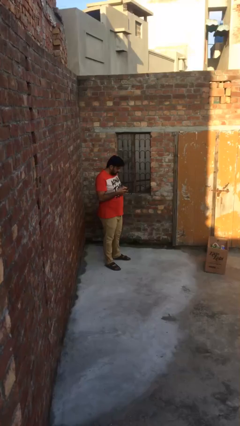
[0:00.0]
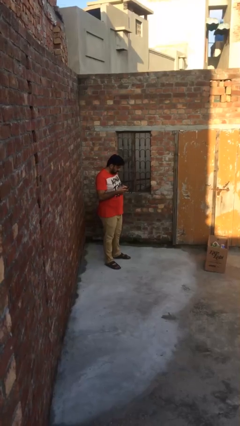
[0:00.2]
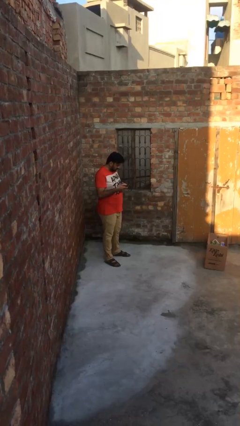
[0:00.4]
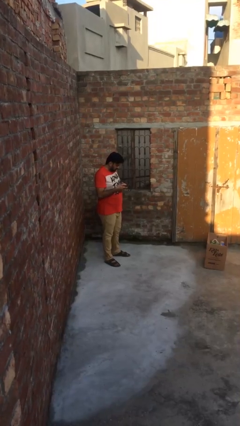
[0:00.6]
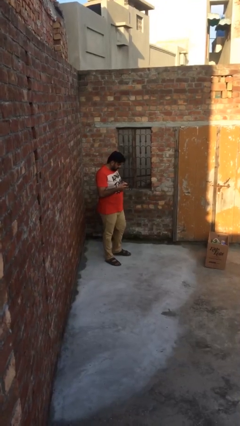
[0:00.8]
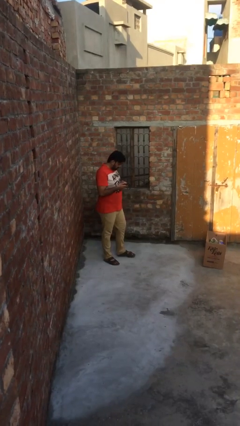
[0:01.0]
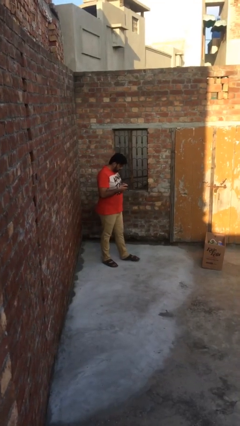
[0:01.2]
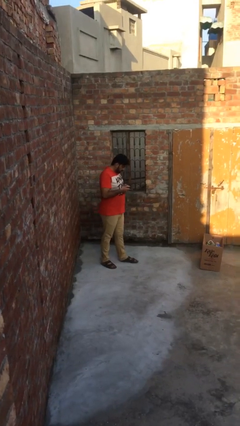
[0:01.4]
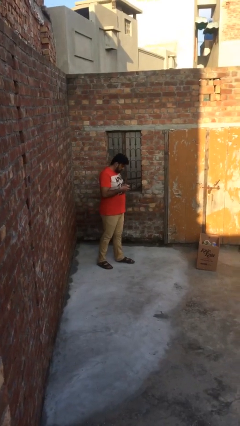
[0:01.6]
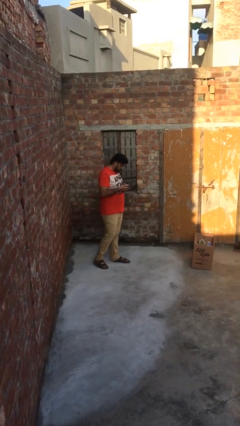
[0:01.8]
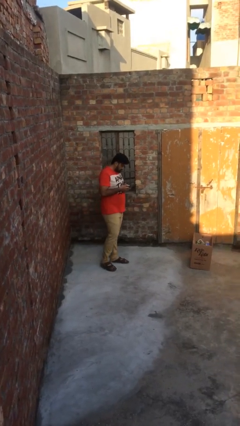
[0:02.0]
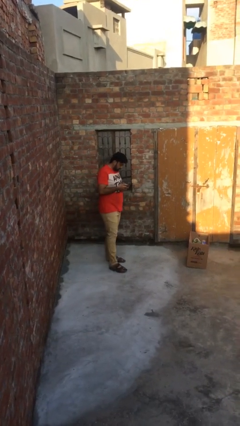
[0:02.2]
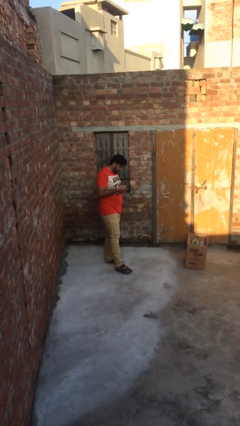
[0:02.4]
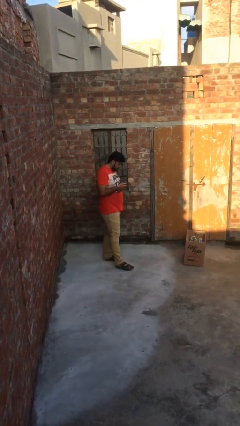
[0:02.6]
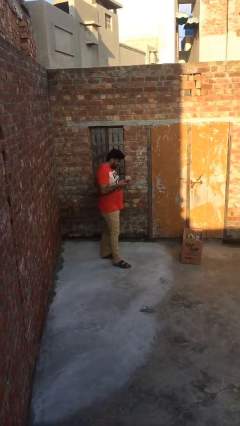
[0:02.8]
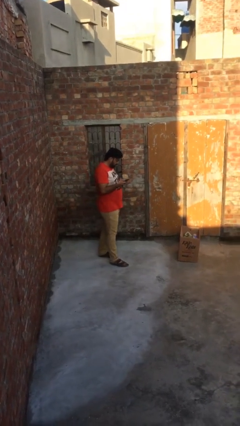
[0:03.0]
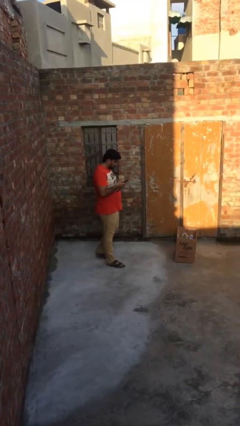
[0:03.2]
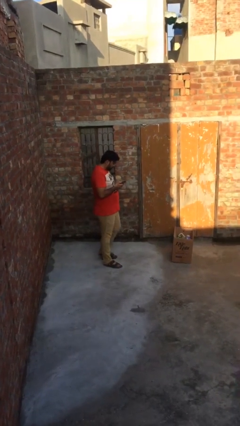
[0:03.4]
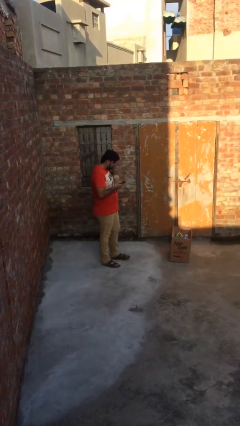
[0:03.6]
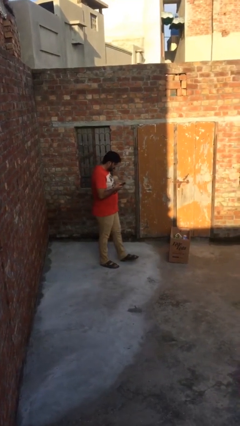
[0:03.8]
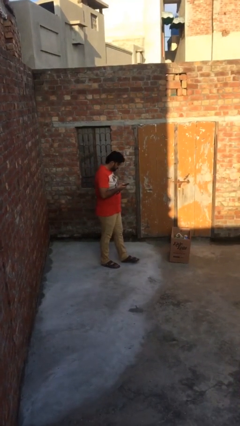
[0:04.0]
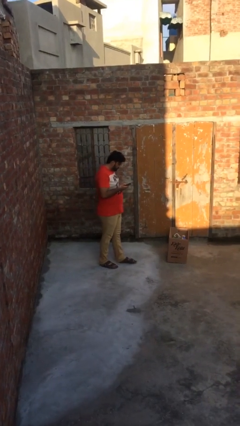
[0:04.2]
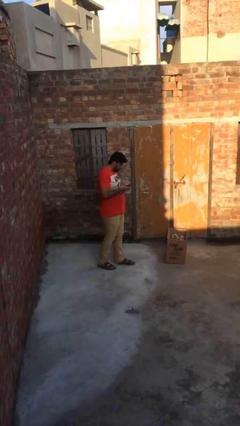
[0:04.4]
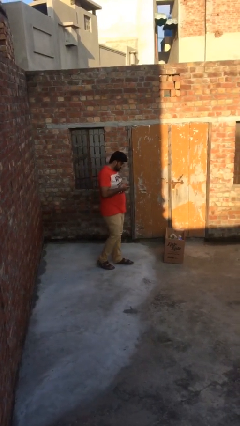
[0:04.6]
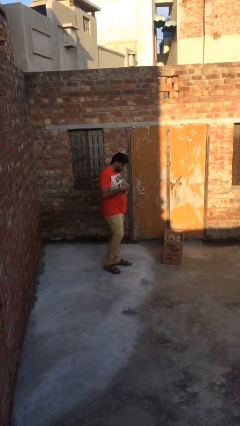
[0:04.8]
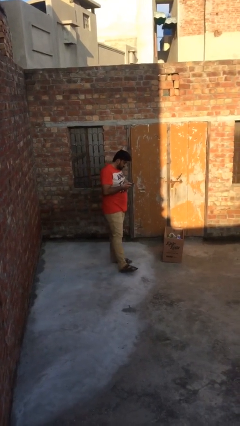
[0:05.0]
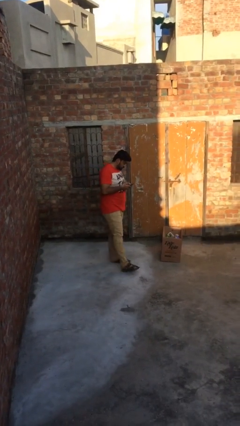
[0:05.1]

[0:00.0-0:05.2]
person texts on phone

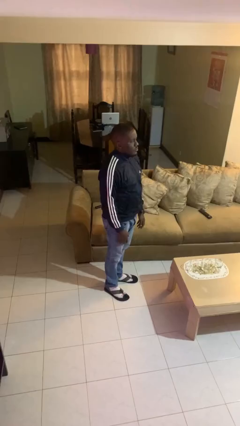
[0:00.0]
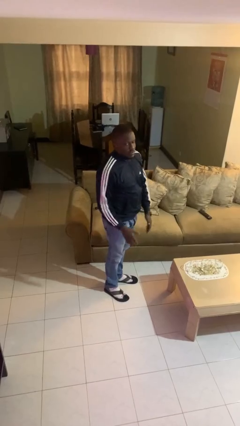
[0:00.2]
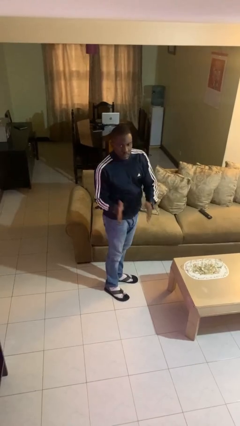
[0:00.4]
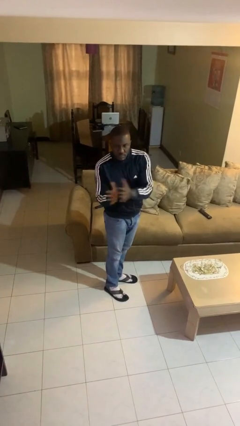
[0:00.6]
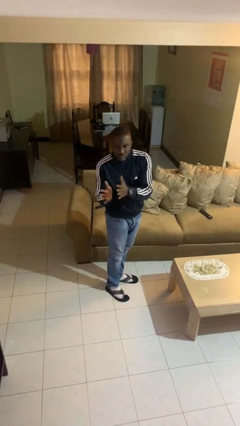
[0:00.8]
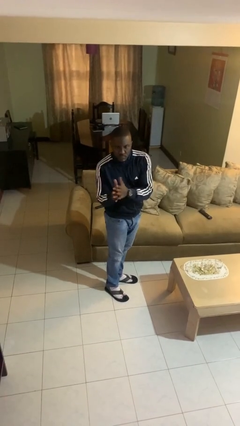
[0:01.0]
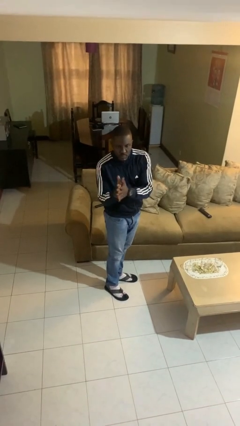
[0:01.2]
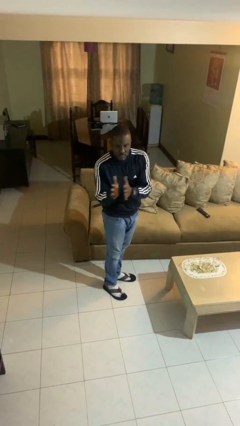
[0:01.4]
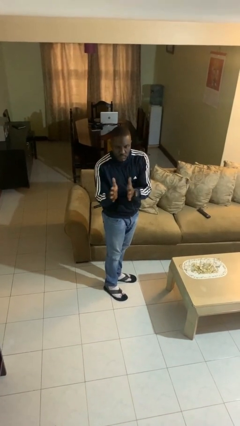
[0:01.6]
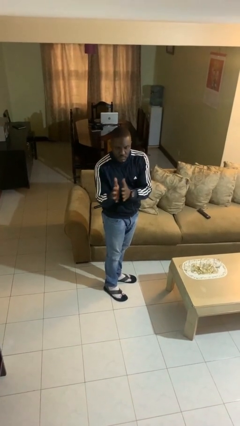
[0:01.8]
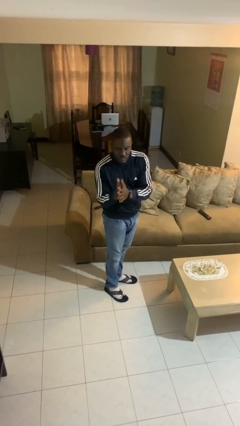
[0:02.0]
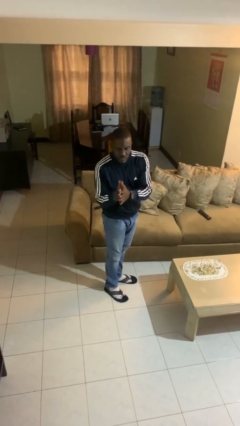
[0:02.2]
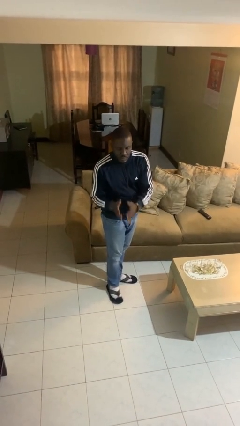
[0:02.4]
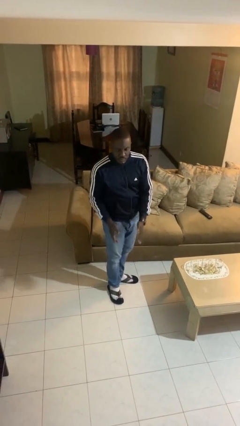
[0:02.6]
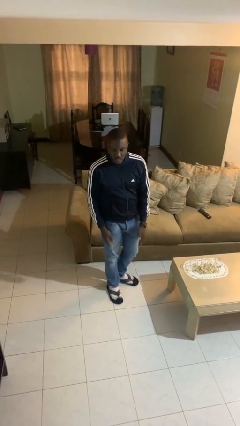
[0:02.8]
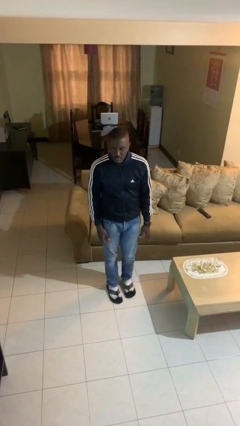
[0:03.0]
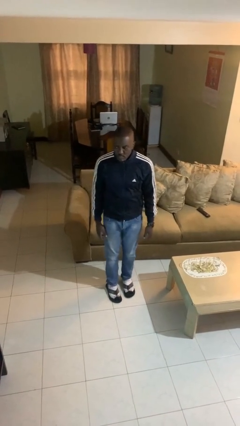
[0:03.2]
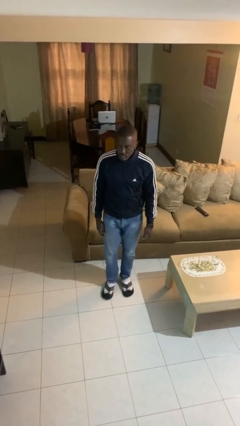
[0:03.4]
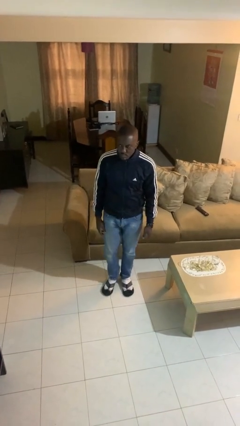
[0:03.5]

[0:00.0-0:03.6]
person claps hands

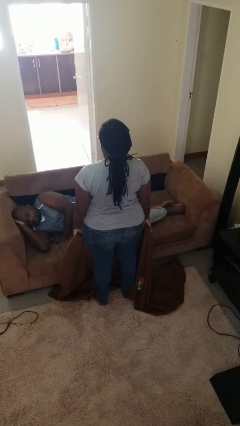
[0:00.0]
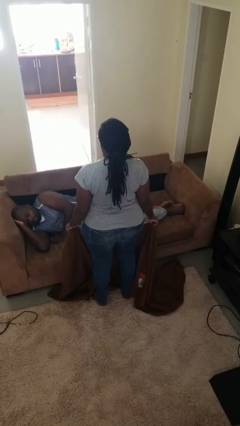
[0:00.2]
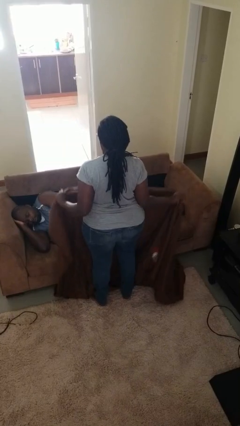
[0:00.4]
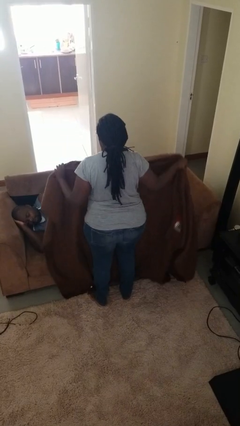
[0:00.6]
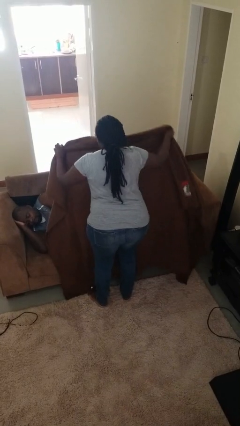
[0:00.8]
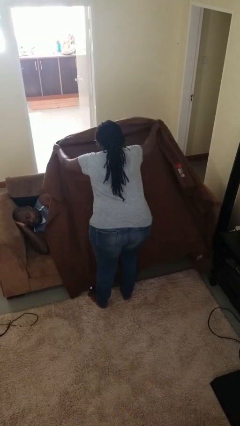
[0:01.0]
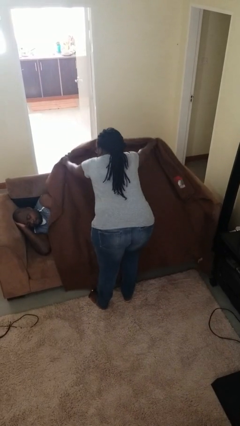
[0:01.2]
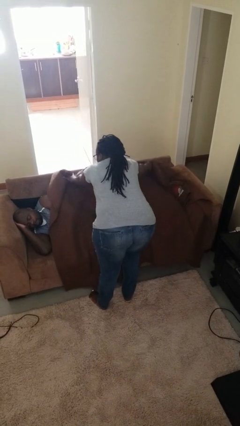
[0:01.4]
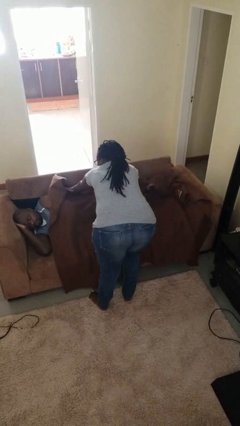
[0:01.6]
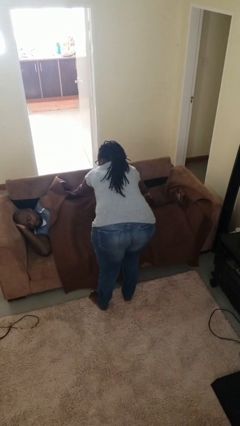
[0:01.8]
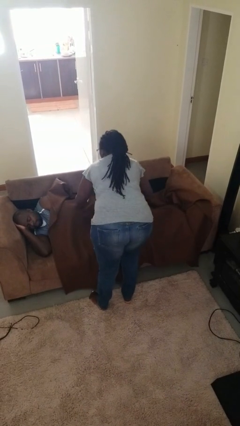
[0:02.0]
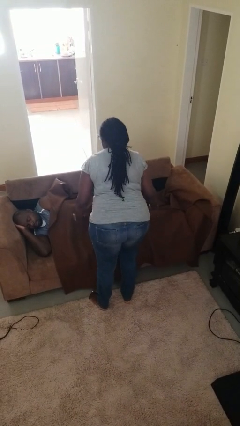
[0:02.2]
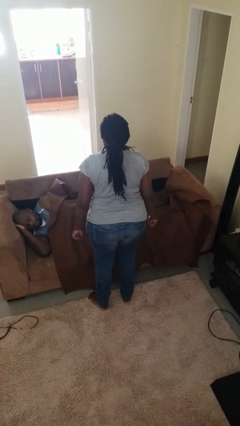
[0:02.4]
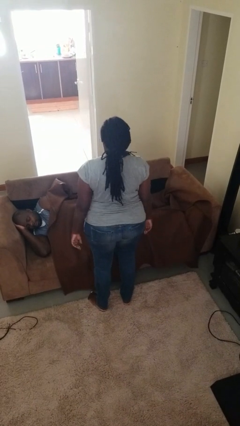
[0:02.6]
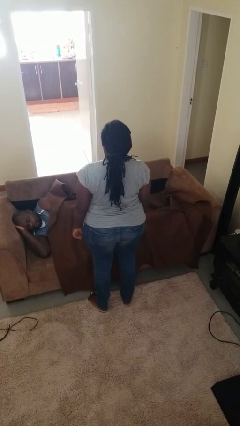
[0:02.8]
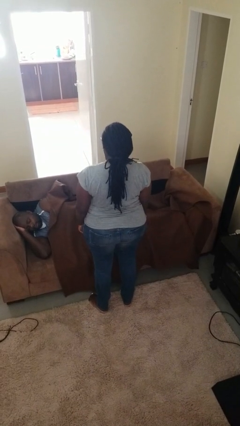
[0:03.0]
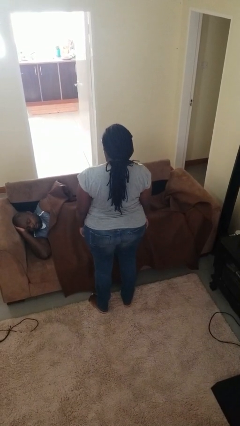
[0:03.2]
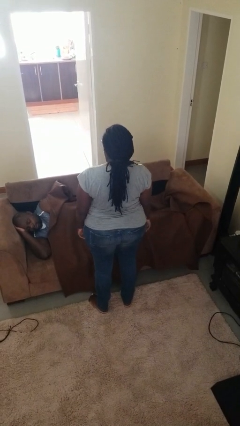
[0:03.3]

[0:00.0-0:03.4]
person covers friend with blanket

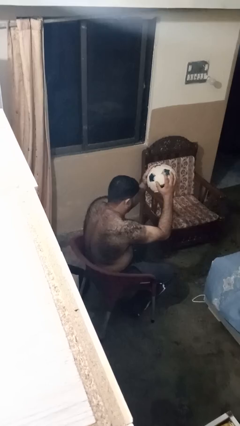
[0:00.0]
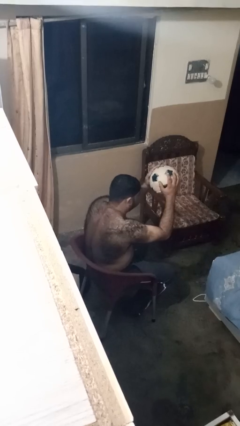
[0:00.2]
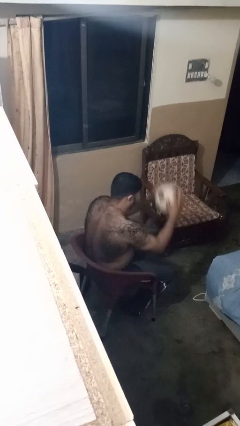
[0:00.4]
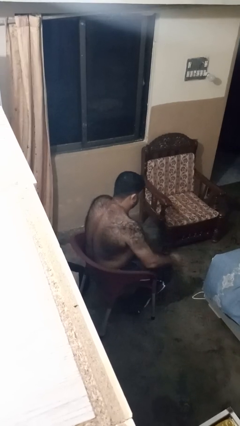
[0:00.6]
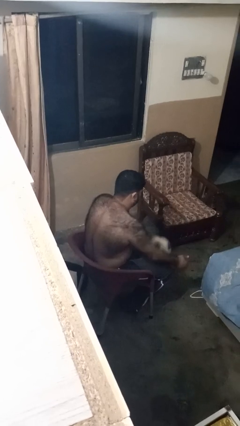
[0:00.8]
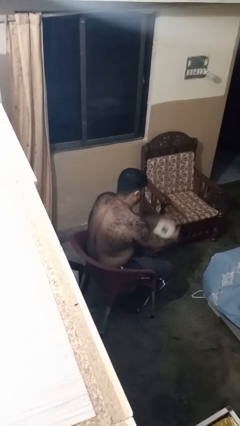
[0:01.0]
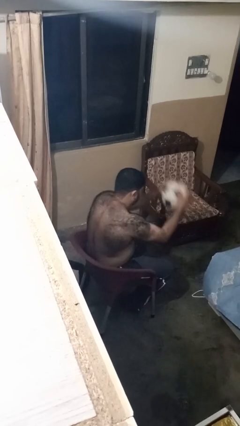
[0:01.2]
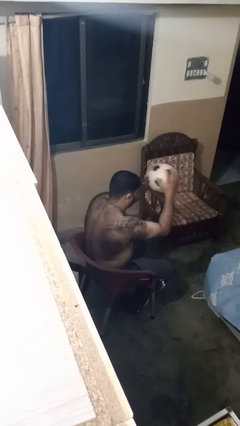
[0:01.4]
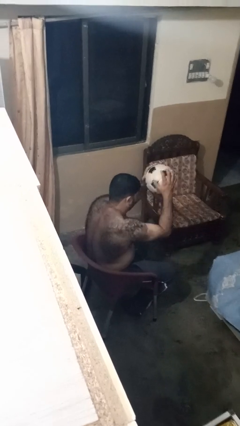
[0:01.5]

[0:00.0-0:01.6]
person bounces ball on floor

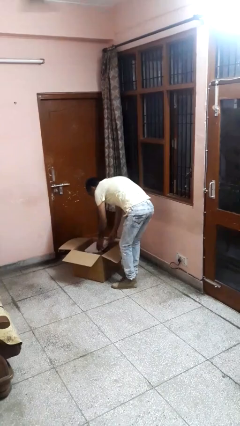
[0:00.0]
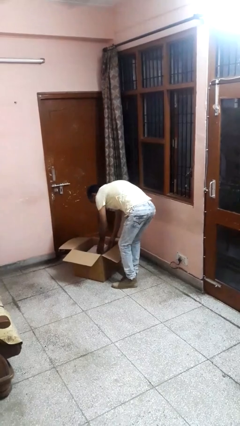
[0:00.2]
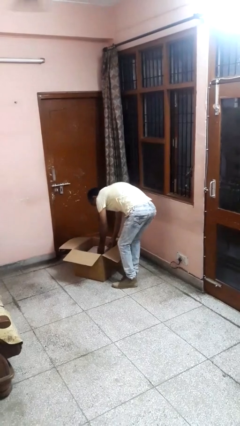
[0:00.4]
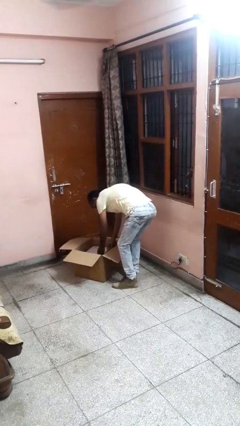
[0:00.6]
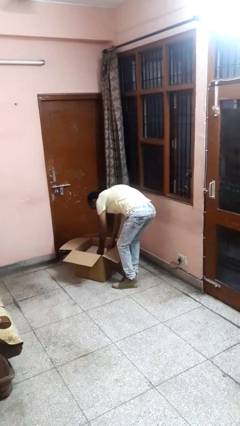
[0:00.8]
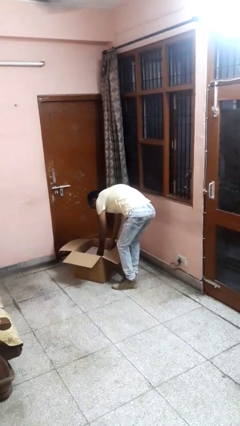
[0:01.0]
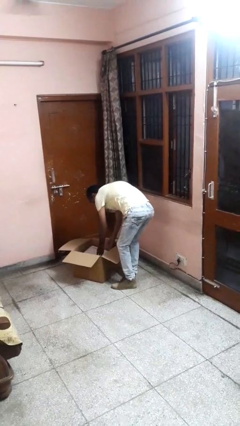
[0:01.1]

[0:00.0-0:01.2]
person puts object into box

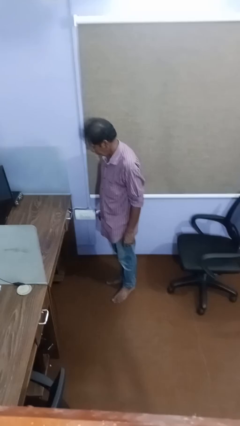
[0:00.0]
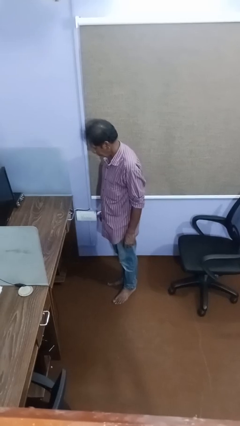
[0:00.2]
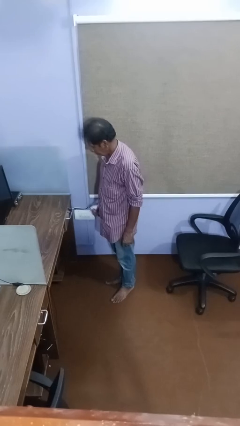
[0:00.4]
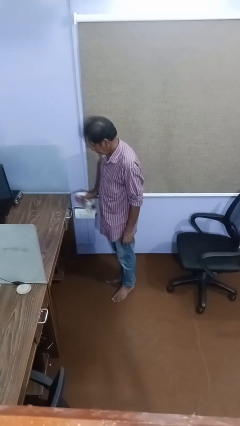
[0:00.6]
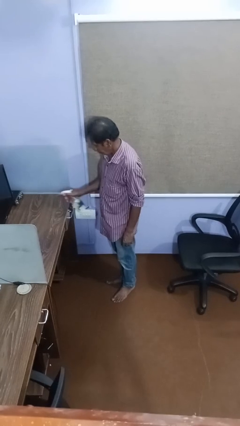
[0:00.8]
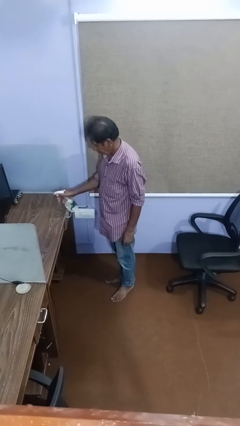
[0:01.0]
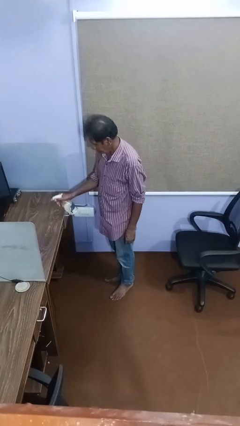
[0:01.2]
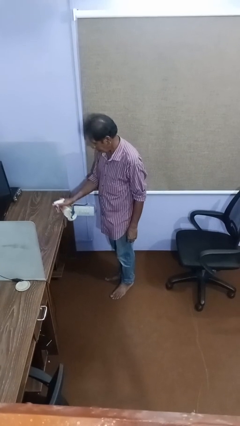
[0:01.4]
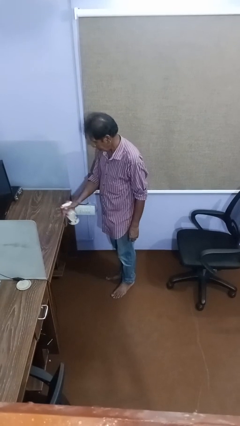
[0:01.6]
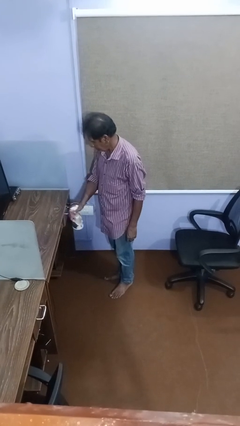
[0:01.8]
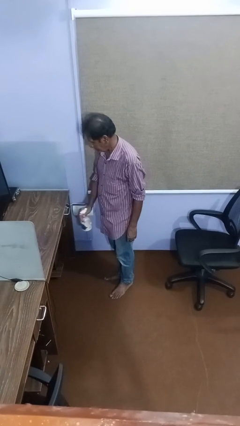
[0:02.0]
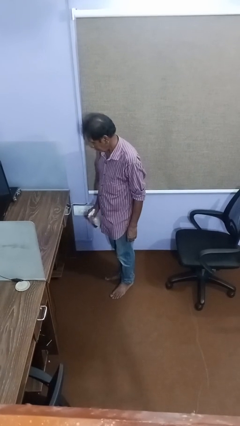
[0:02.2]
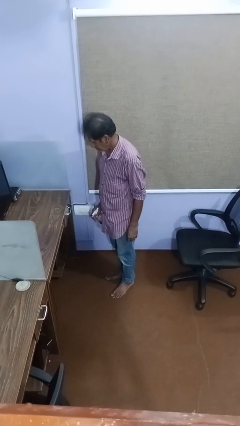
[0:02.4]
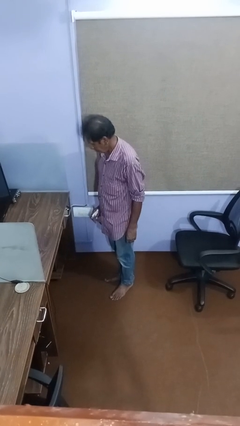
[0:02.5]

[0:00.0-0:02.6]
person sprays from bottle
